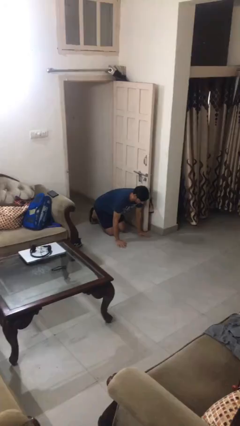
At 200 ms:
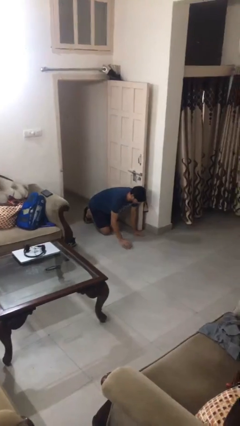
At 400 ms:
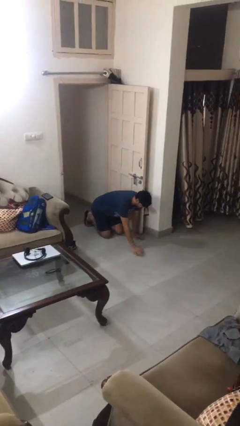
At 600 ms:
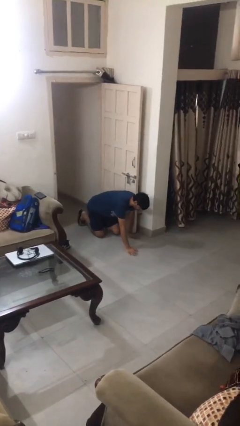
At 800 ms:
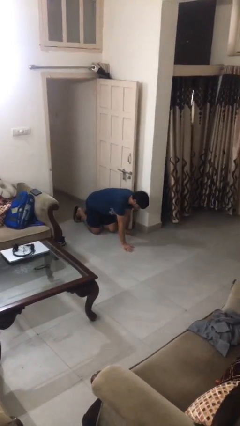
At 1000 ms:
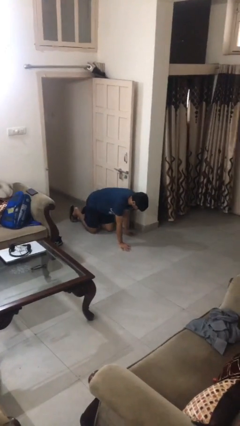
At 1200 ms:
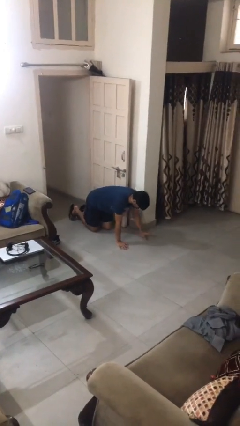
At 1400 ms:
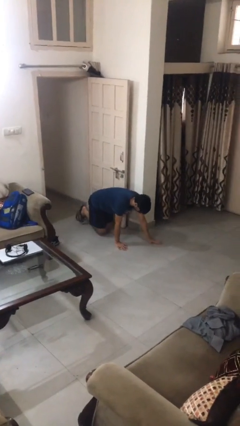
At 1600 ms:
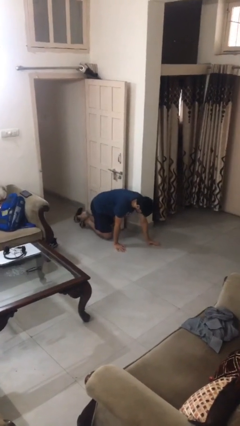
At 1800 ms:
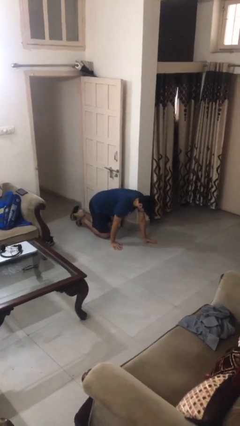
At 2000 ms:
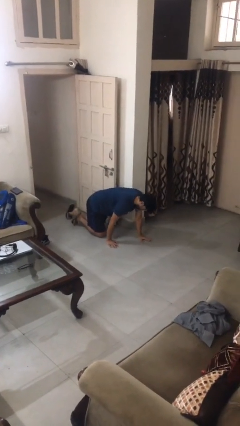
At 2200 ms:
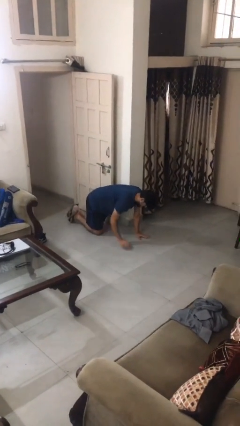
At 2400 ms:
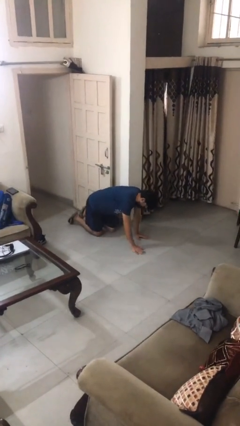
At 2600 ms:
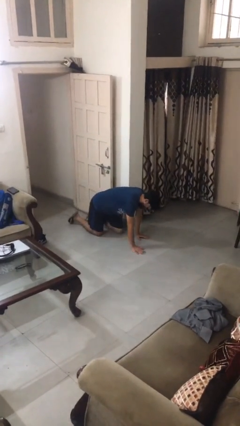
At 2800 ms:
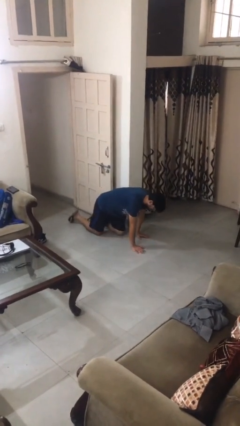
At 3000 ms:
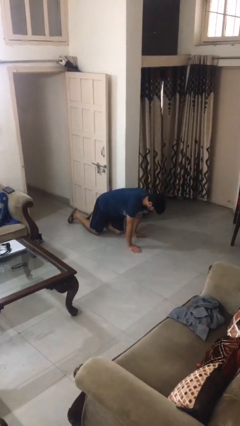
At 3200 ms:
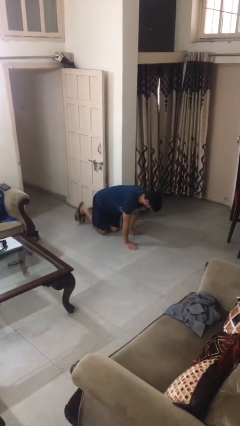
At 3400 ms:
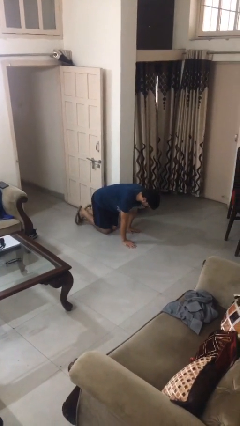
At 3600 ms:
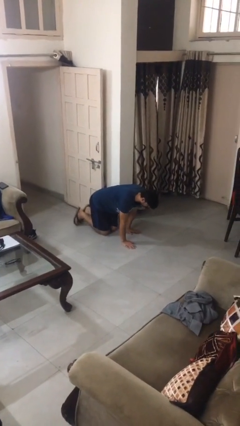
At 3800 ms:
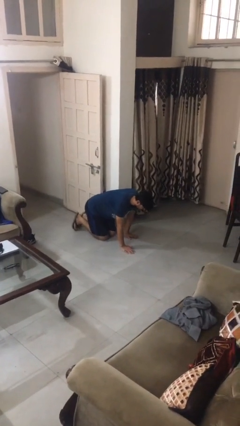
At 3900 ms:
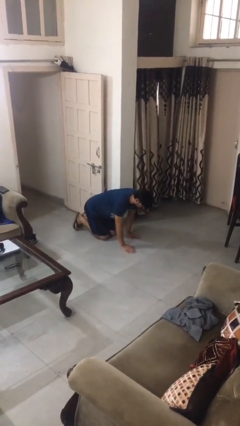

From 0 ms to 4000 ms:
person crawls

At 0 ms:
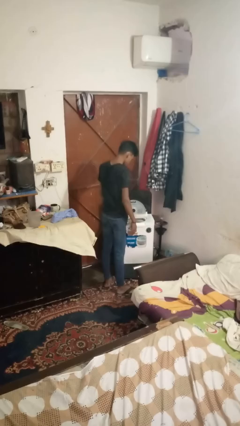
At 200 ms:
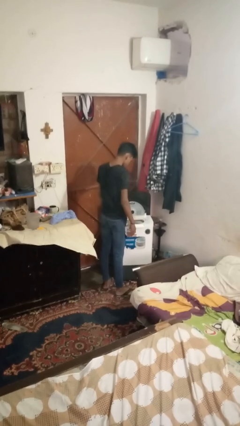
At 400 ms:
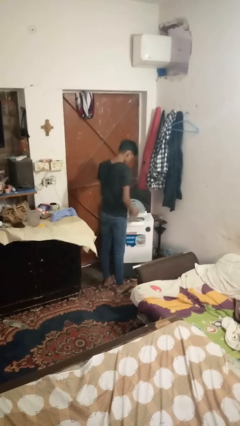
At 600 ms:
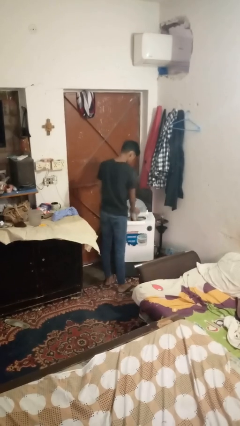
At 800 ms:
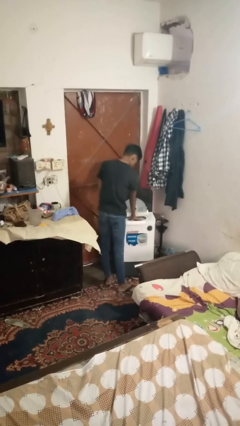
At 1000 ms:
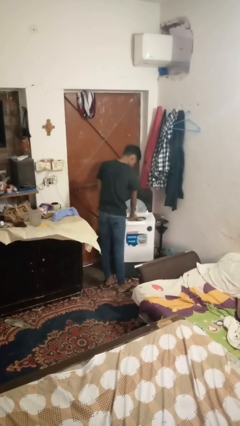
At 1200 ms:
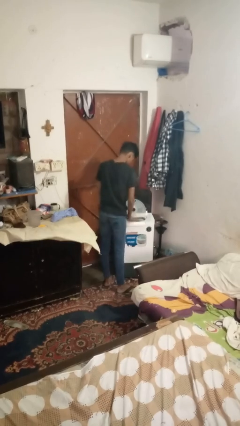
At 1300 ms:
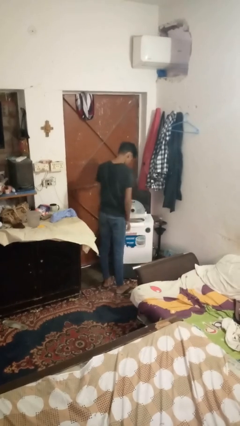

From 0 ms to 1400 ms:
person loads clotheswasher

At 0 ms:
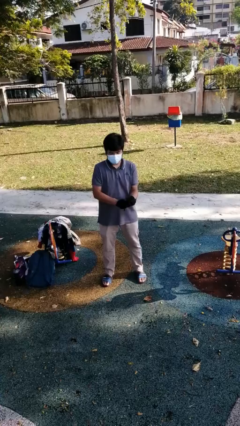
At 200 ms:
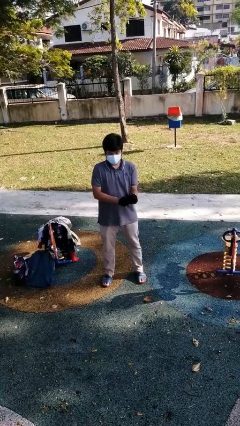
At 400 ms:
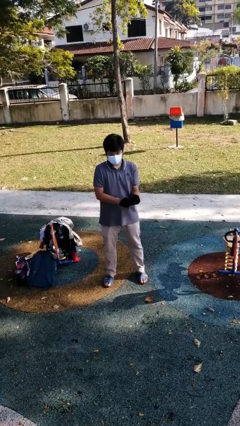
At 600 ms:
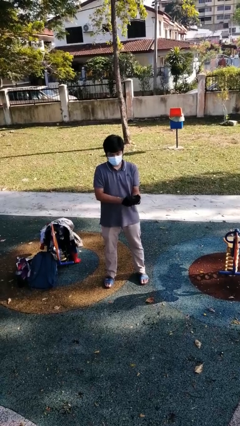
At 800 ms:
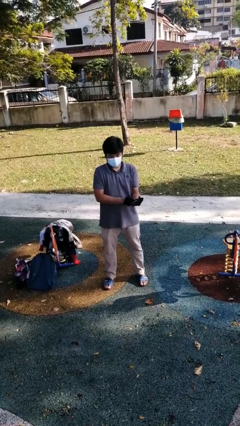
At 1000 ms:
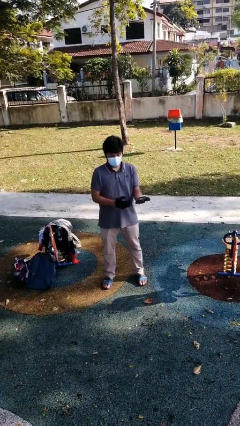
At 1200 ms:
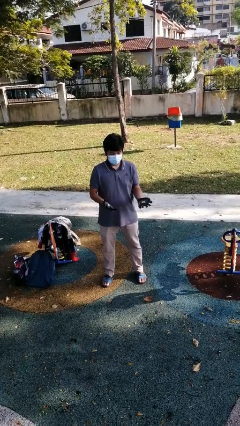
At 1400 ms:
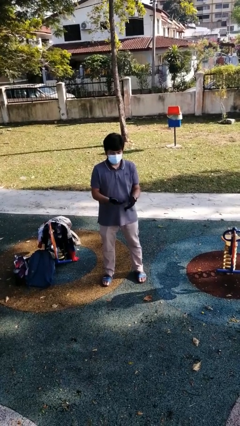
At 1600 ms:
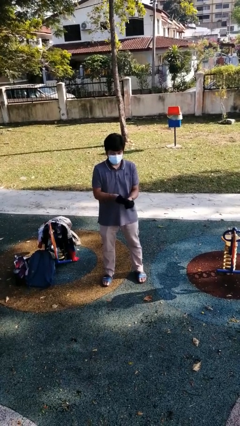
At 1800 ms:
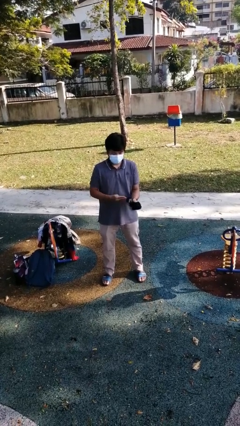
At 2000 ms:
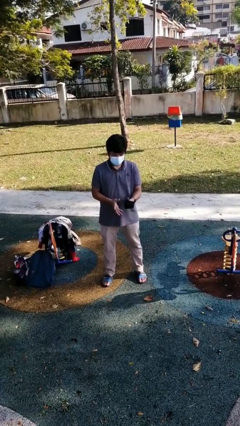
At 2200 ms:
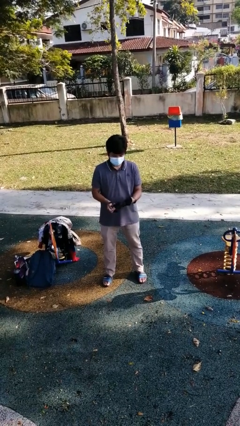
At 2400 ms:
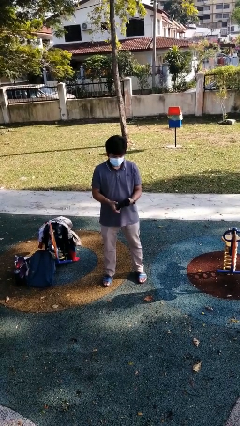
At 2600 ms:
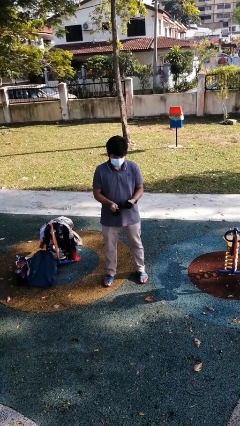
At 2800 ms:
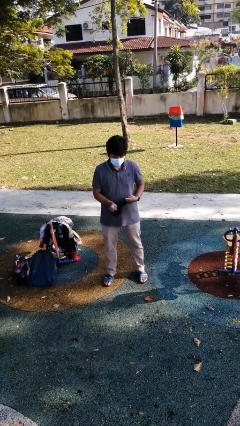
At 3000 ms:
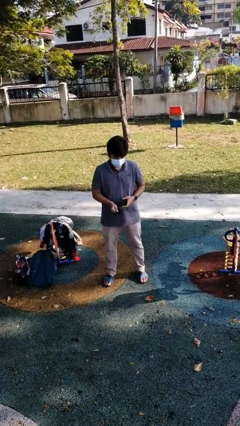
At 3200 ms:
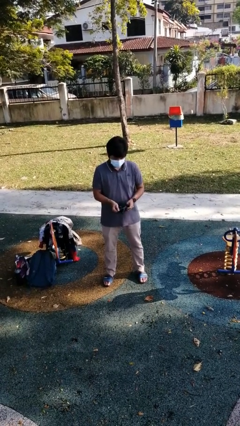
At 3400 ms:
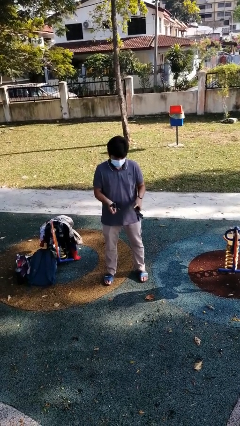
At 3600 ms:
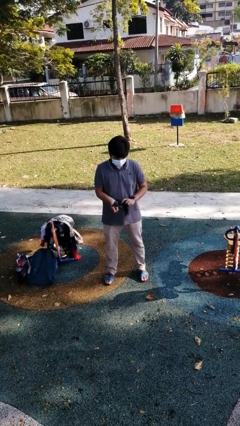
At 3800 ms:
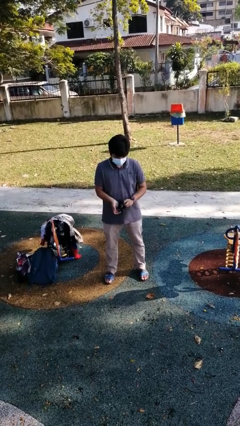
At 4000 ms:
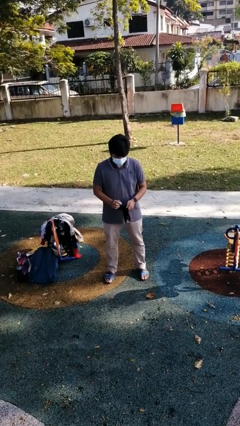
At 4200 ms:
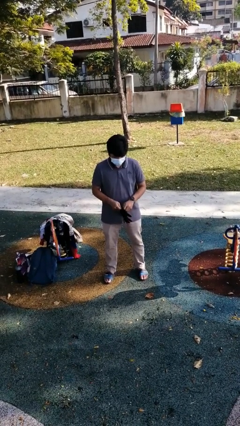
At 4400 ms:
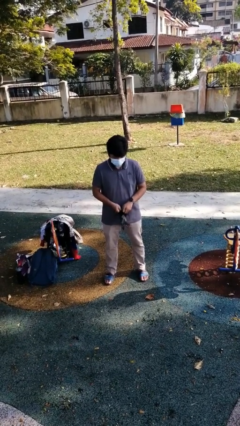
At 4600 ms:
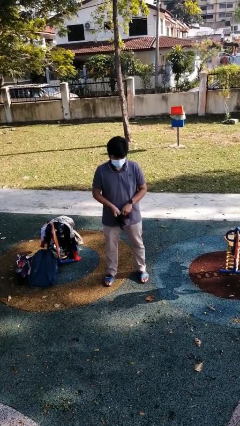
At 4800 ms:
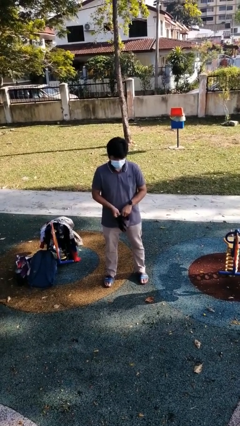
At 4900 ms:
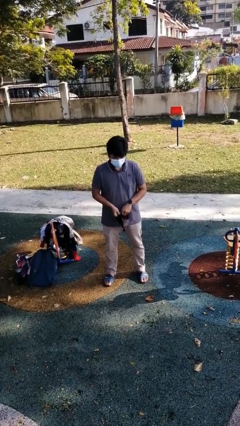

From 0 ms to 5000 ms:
person takes off gloves

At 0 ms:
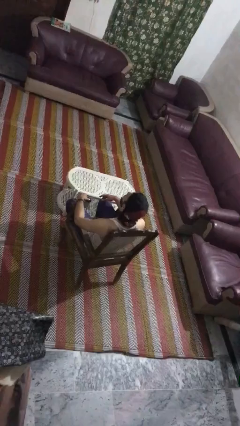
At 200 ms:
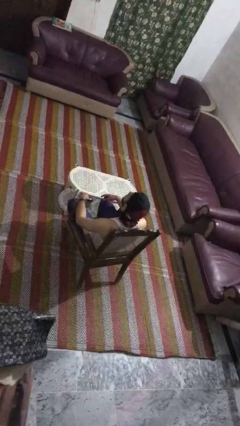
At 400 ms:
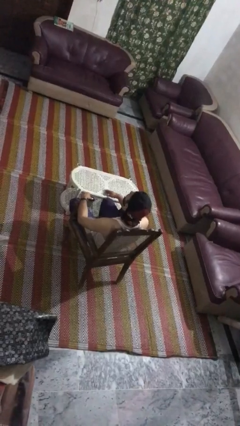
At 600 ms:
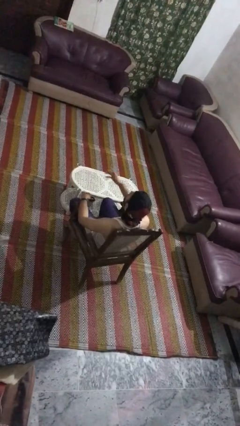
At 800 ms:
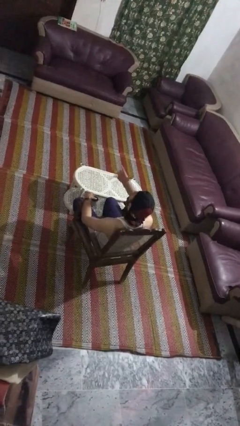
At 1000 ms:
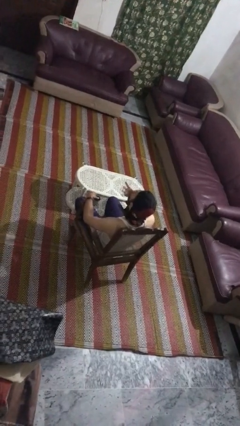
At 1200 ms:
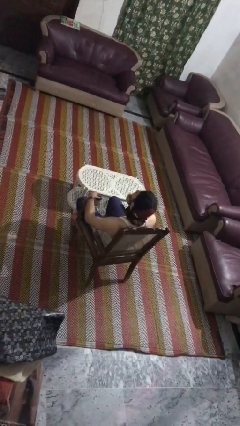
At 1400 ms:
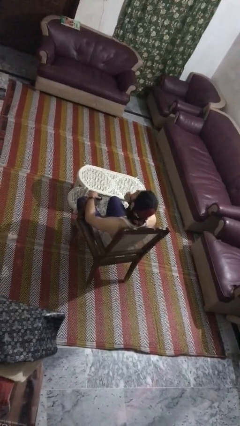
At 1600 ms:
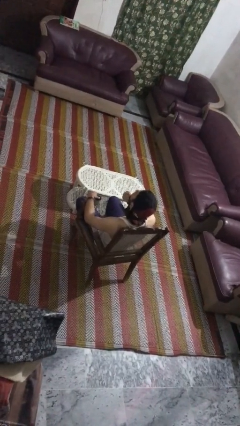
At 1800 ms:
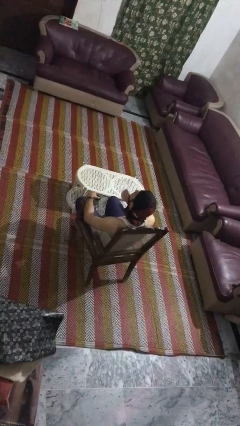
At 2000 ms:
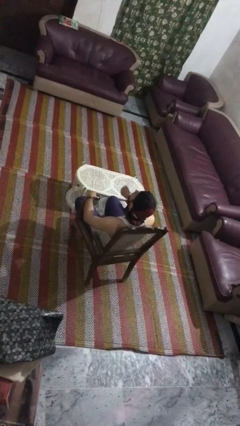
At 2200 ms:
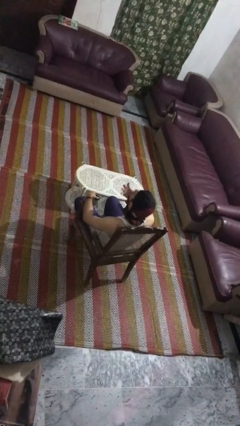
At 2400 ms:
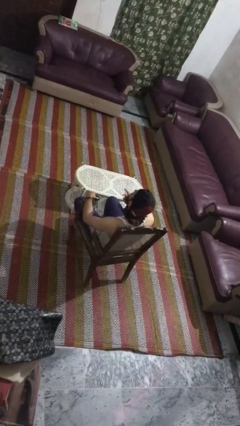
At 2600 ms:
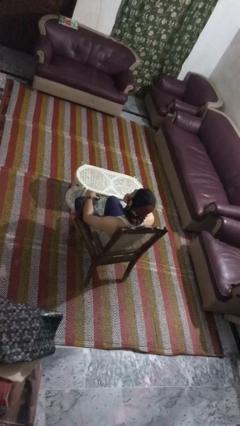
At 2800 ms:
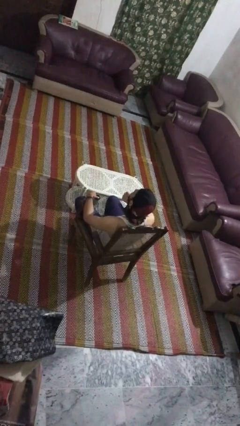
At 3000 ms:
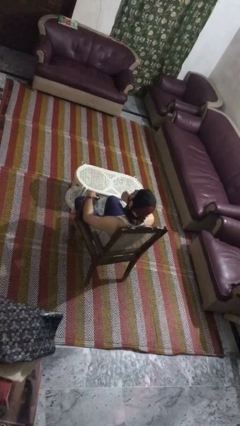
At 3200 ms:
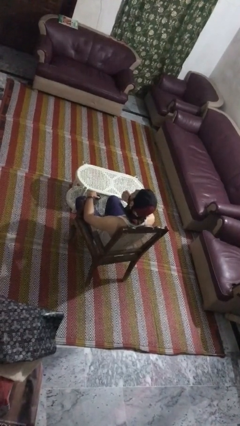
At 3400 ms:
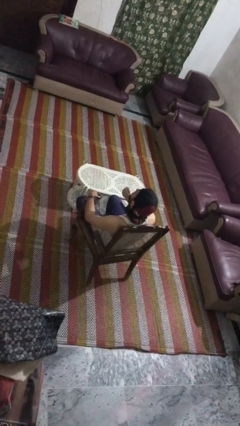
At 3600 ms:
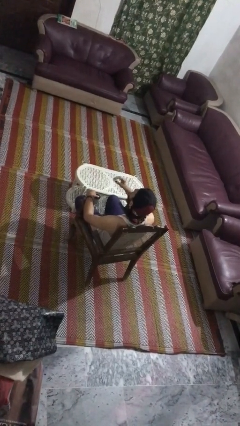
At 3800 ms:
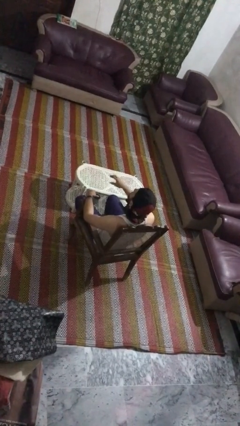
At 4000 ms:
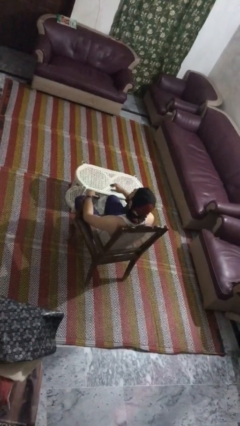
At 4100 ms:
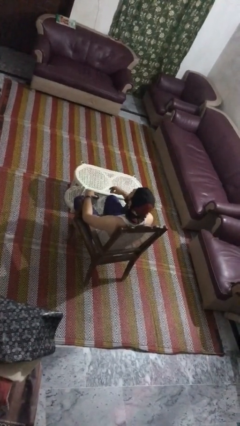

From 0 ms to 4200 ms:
person strokes chin

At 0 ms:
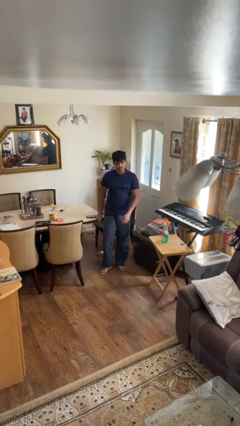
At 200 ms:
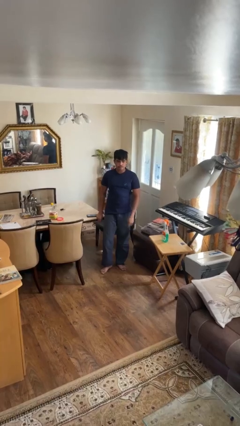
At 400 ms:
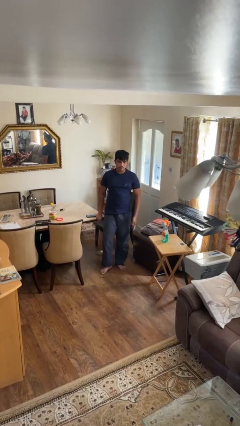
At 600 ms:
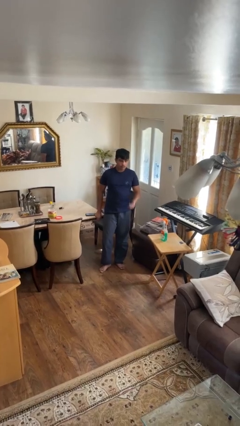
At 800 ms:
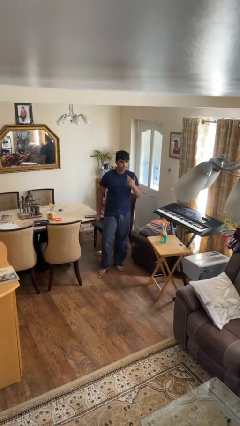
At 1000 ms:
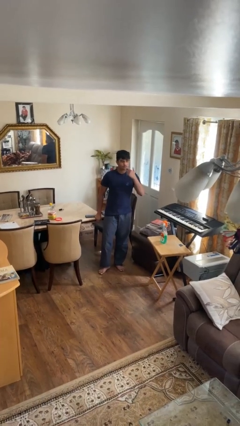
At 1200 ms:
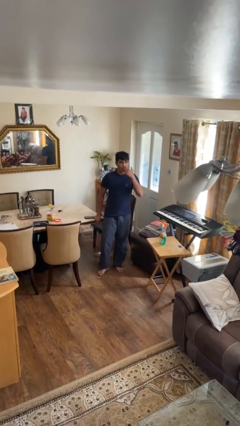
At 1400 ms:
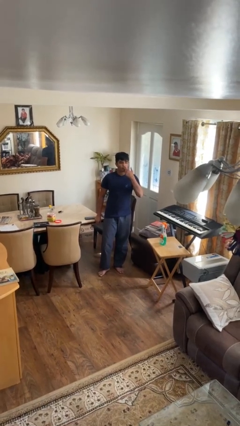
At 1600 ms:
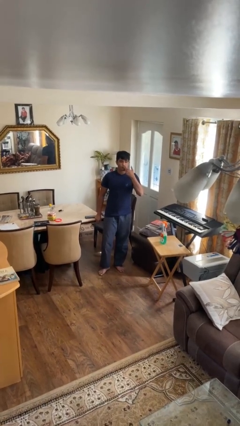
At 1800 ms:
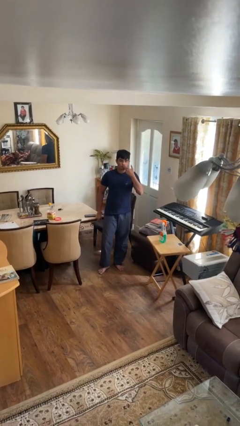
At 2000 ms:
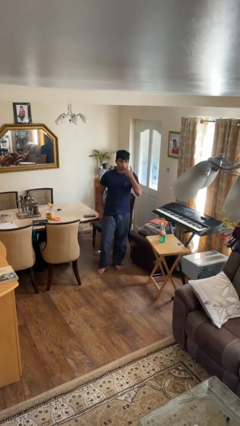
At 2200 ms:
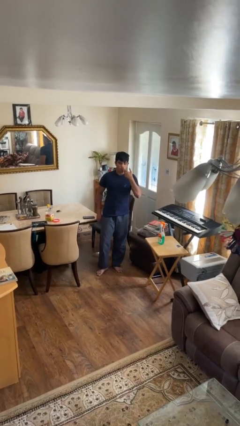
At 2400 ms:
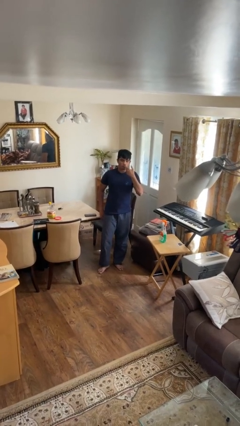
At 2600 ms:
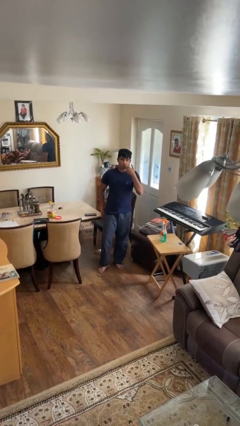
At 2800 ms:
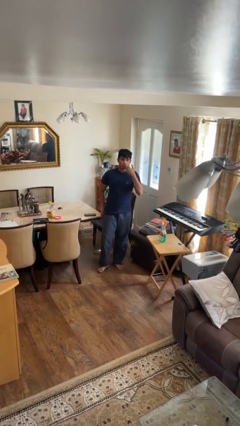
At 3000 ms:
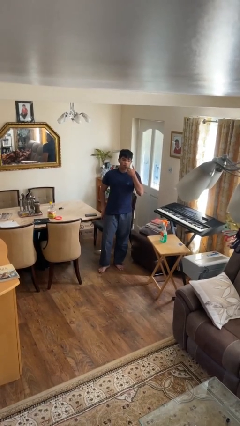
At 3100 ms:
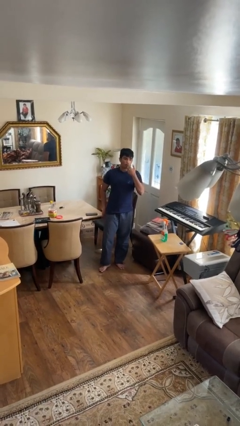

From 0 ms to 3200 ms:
person licks fingers
